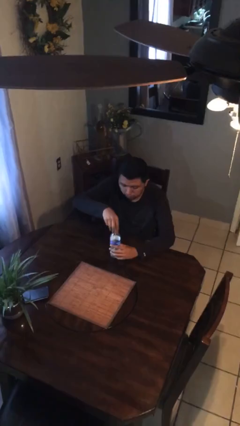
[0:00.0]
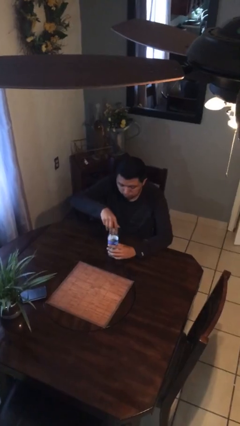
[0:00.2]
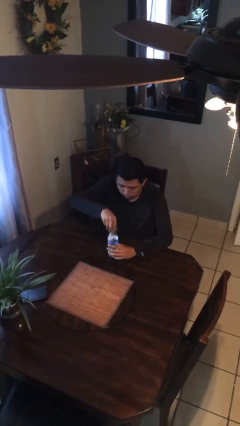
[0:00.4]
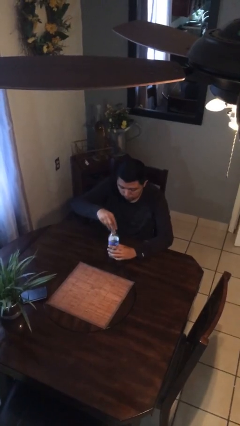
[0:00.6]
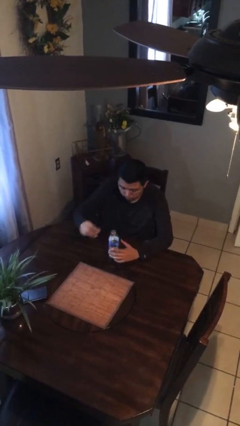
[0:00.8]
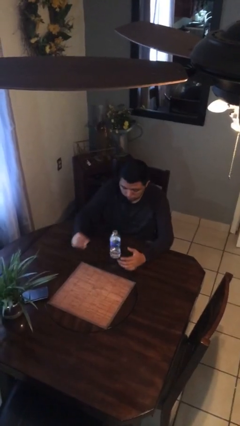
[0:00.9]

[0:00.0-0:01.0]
person unscrews lid from bottle

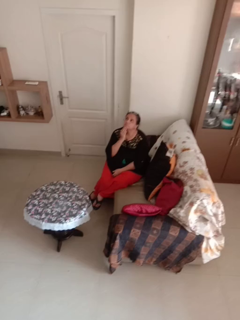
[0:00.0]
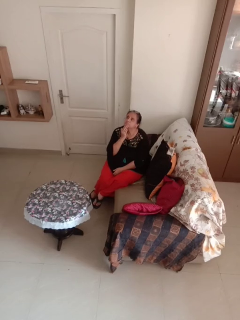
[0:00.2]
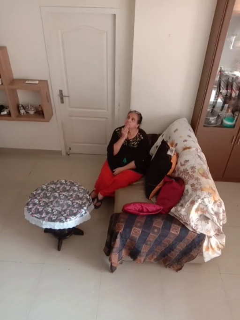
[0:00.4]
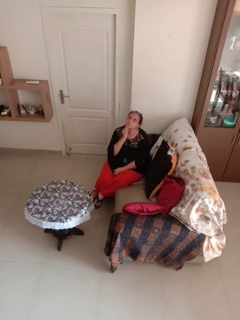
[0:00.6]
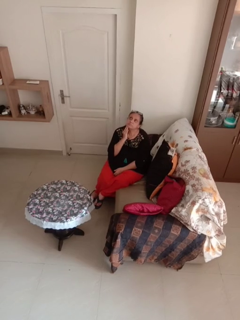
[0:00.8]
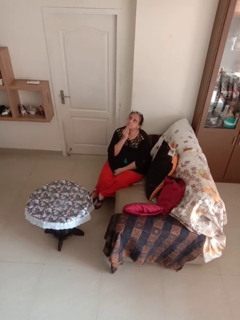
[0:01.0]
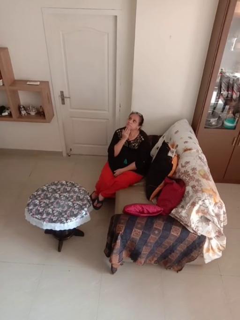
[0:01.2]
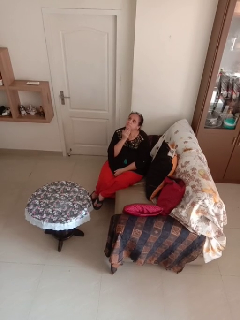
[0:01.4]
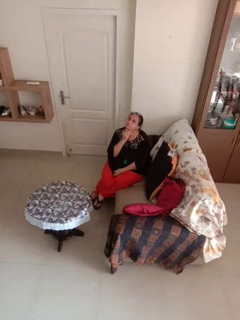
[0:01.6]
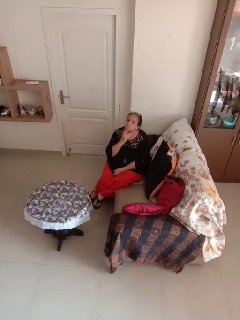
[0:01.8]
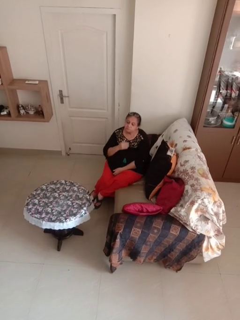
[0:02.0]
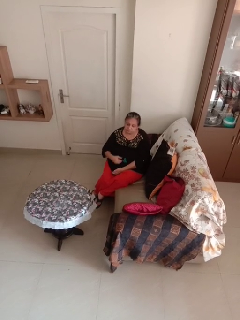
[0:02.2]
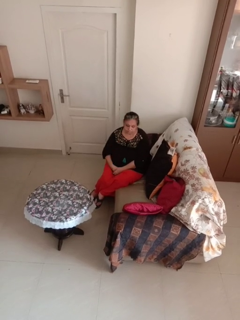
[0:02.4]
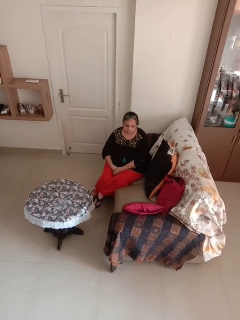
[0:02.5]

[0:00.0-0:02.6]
person strokes chin

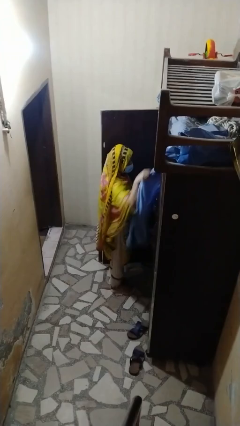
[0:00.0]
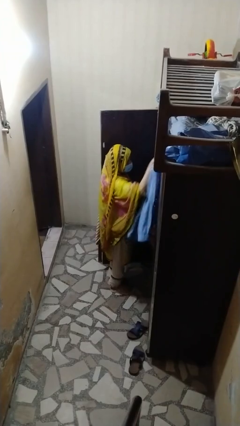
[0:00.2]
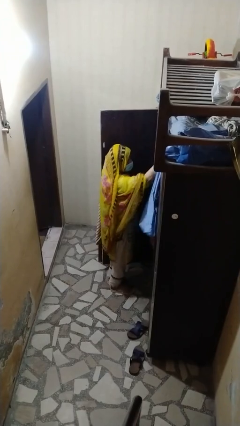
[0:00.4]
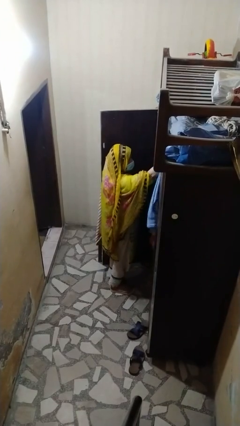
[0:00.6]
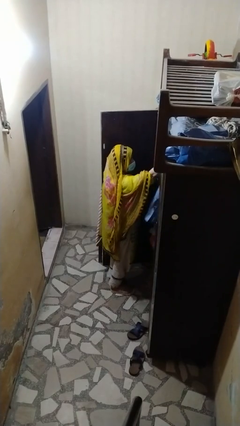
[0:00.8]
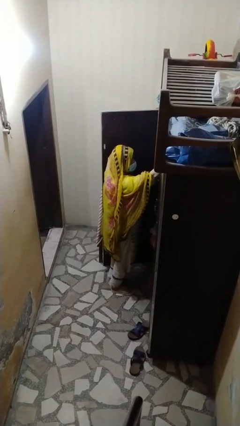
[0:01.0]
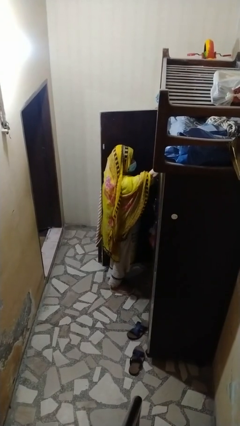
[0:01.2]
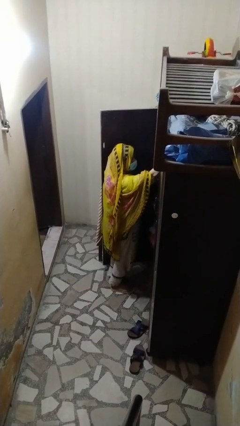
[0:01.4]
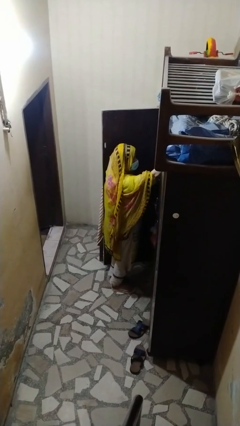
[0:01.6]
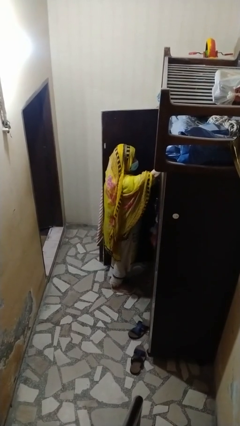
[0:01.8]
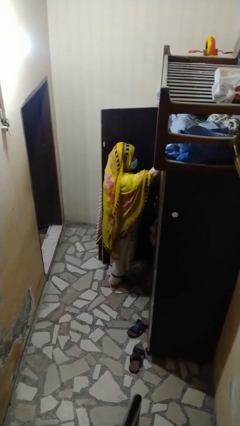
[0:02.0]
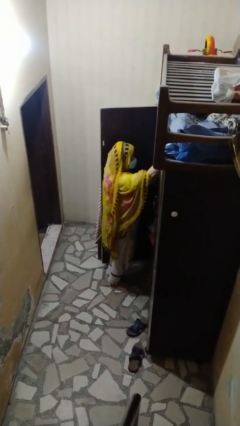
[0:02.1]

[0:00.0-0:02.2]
person puts clothes into closet

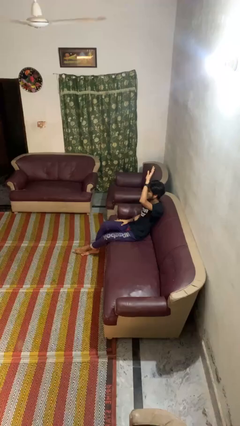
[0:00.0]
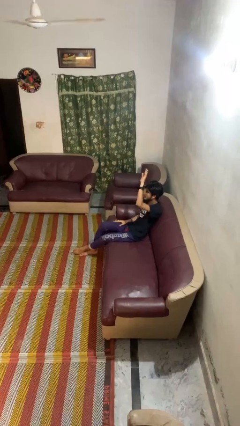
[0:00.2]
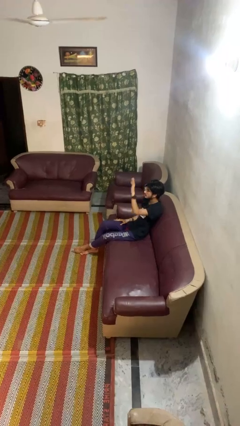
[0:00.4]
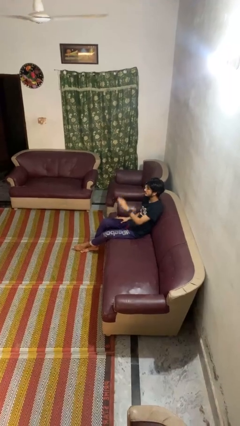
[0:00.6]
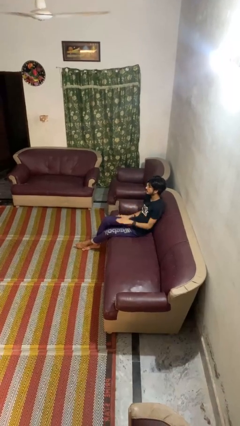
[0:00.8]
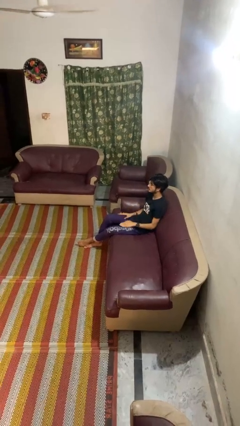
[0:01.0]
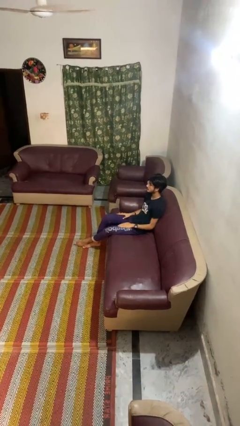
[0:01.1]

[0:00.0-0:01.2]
person gestures lower hand

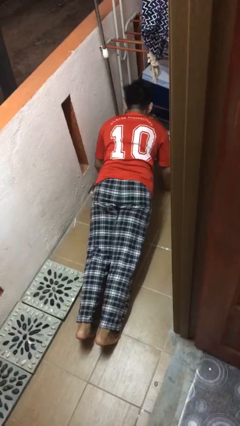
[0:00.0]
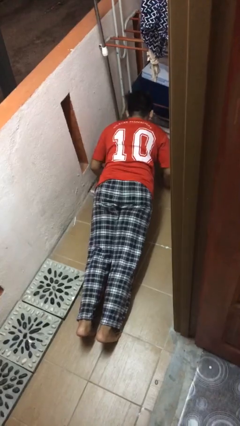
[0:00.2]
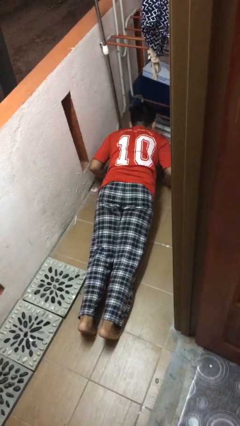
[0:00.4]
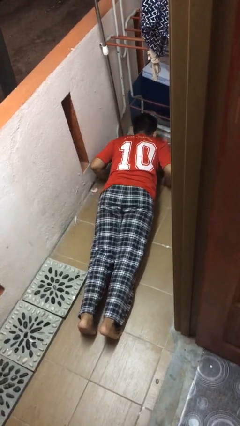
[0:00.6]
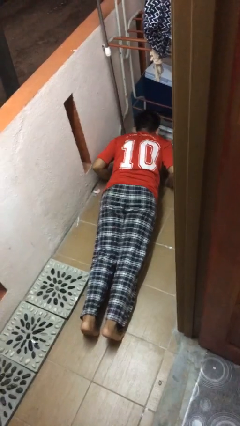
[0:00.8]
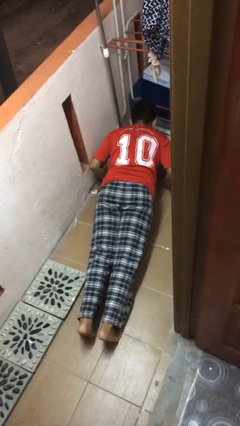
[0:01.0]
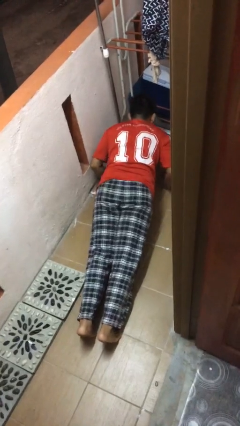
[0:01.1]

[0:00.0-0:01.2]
person exercises with pushup

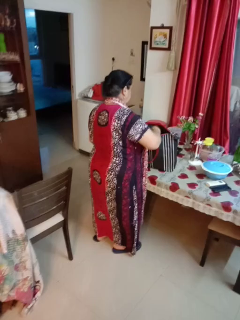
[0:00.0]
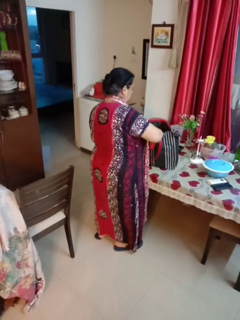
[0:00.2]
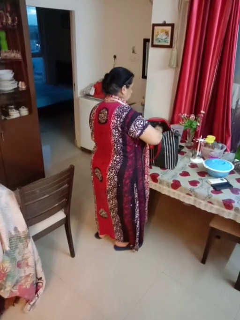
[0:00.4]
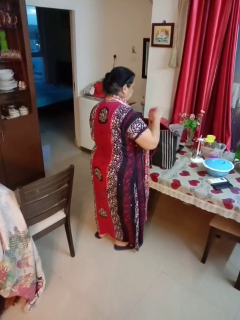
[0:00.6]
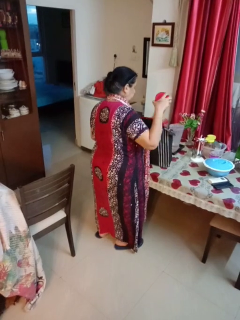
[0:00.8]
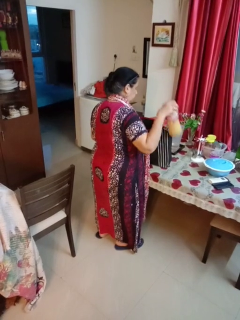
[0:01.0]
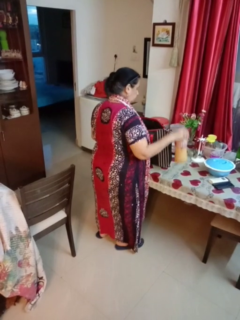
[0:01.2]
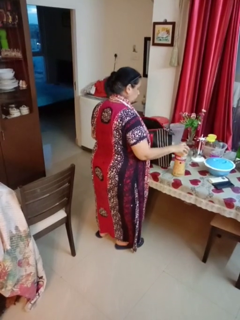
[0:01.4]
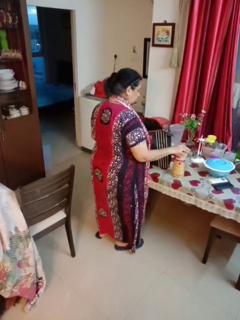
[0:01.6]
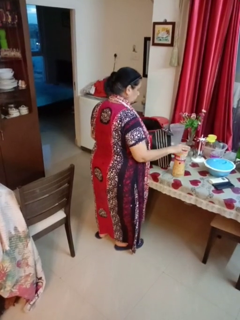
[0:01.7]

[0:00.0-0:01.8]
person takes object from bag

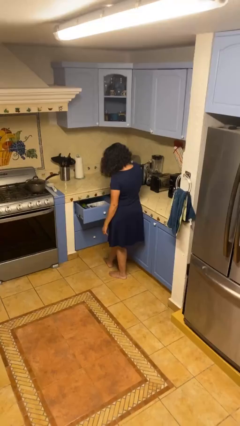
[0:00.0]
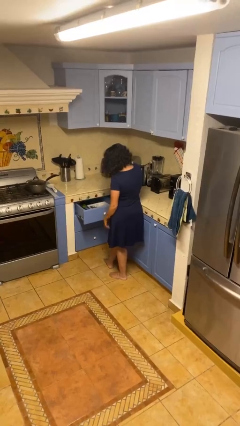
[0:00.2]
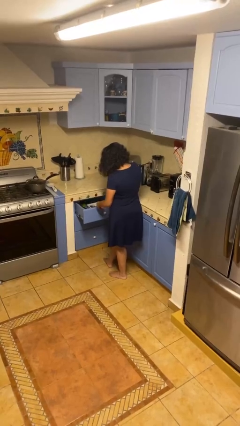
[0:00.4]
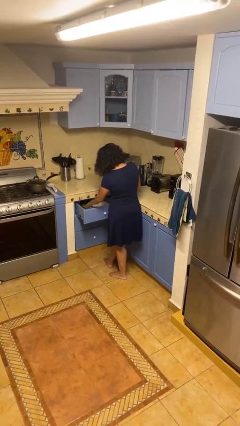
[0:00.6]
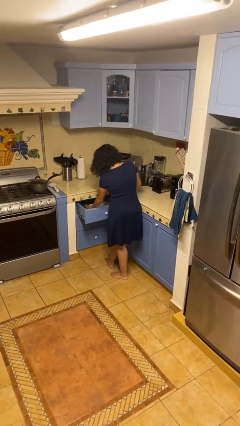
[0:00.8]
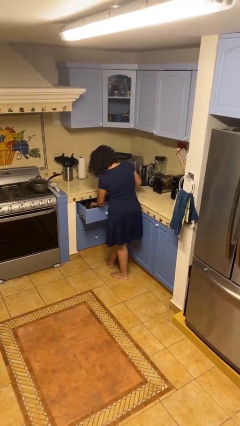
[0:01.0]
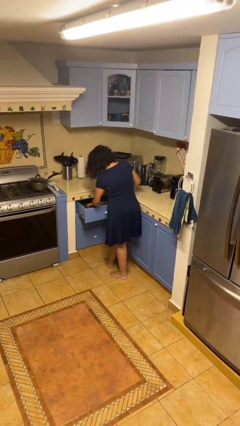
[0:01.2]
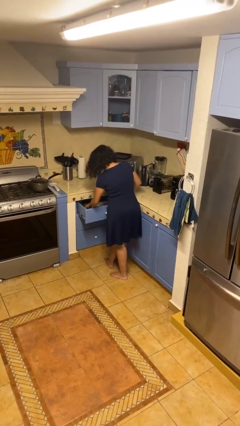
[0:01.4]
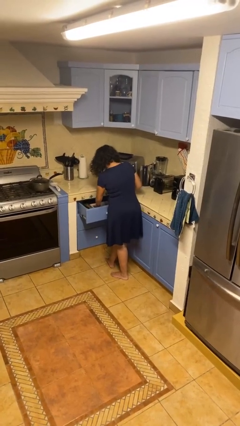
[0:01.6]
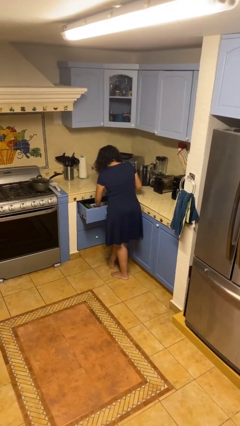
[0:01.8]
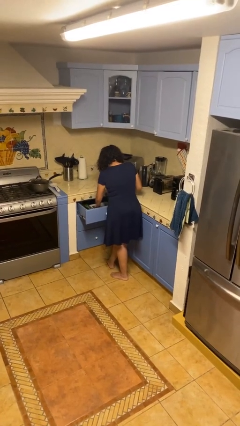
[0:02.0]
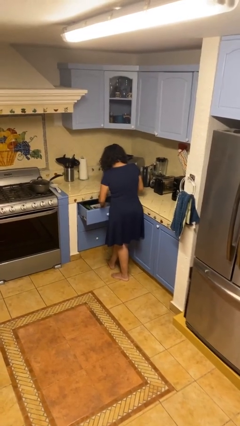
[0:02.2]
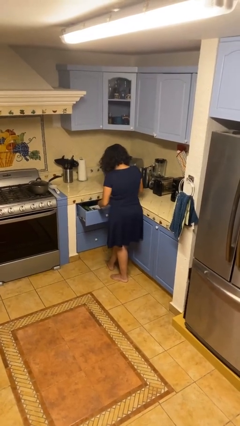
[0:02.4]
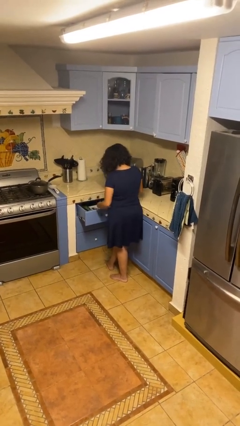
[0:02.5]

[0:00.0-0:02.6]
person searches in kitchen drawer

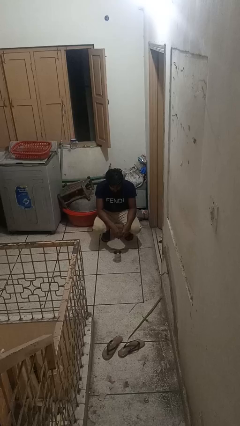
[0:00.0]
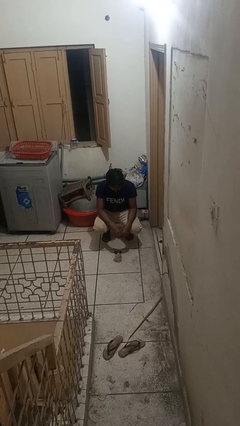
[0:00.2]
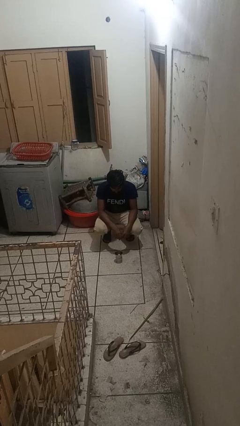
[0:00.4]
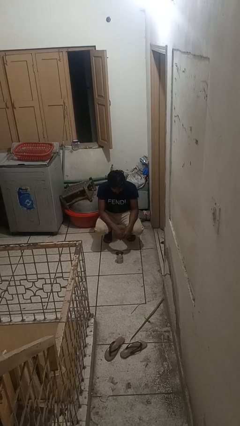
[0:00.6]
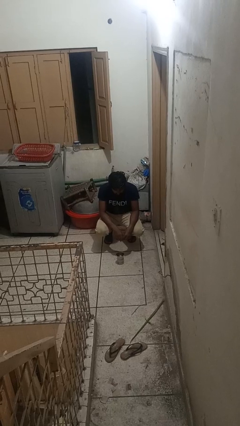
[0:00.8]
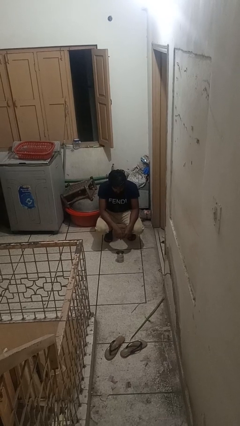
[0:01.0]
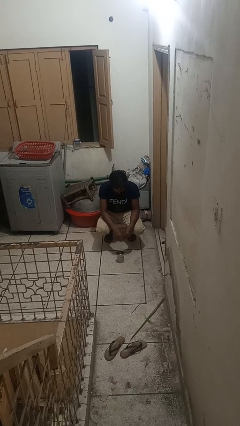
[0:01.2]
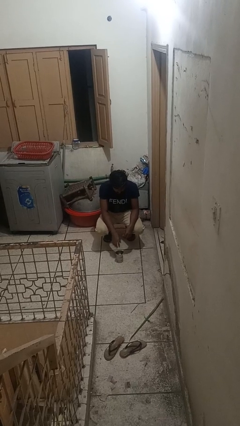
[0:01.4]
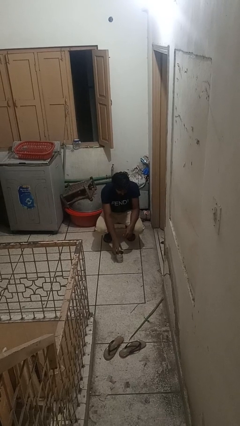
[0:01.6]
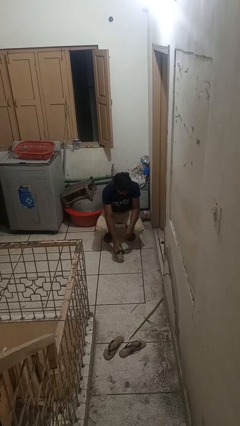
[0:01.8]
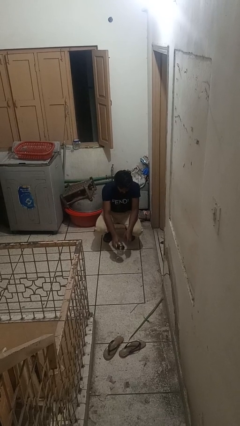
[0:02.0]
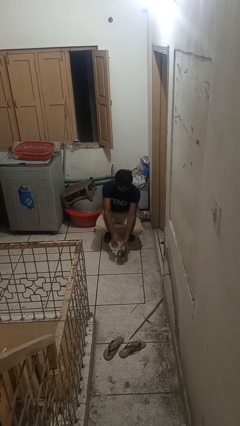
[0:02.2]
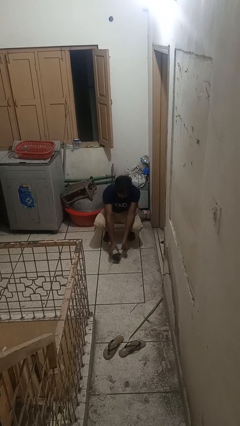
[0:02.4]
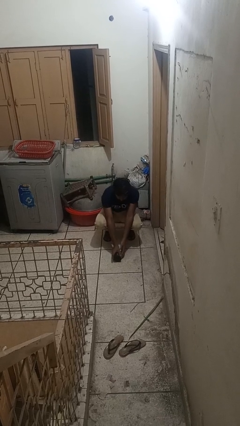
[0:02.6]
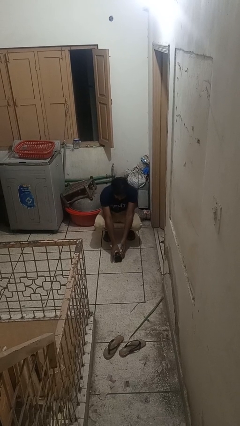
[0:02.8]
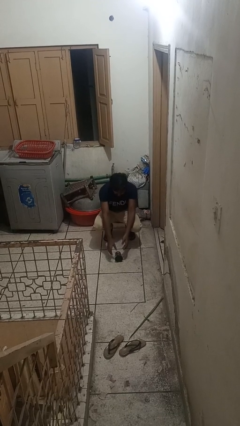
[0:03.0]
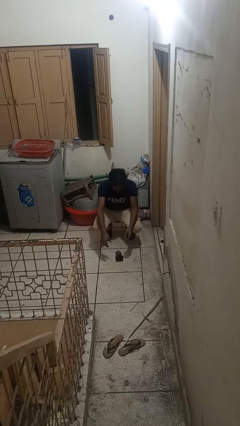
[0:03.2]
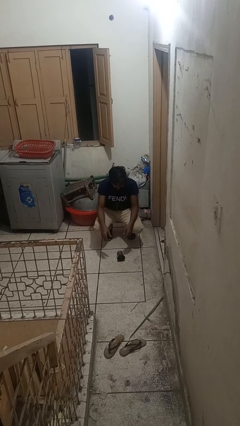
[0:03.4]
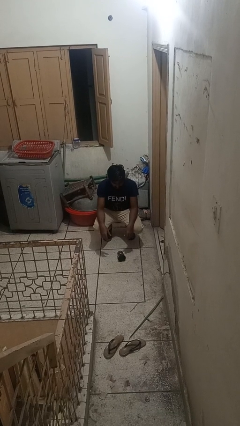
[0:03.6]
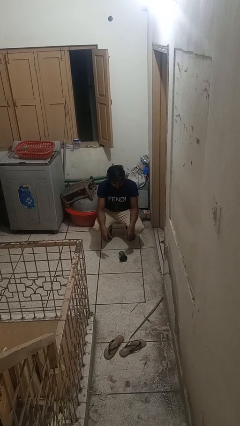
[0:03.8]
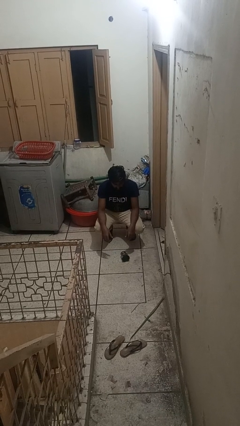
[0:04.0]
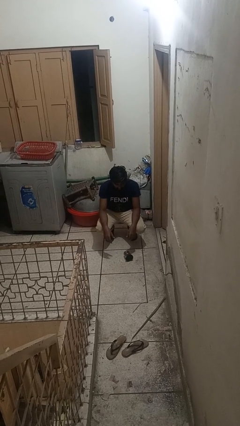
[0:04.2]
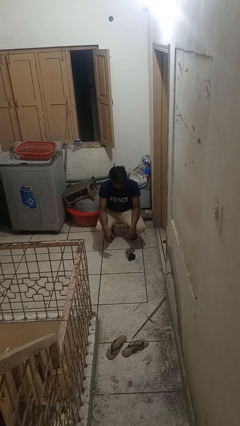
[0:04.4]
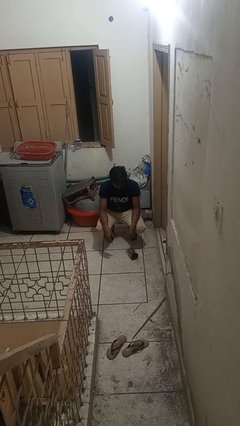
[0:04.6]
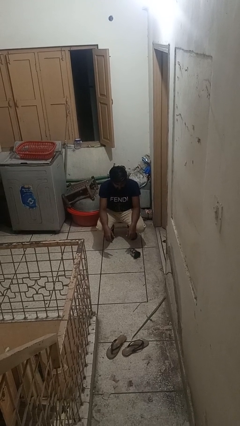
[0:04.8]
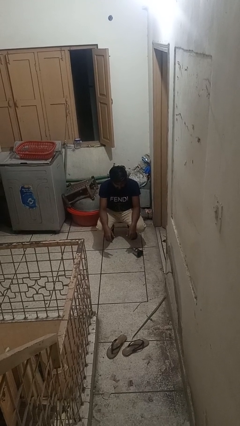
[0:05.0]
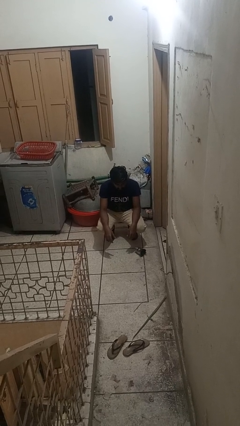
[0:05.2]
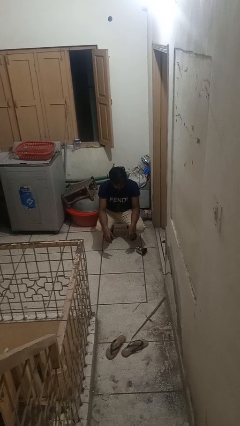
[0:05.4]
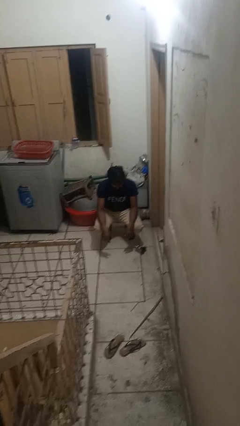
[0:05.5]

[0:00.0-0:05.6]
person spills on floor
